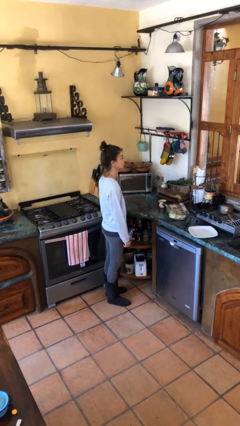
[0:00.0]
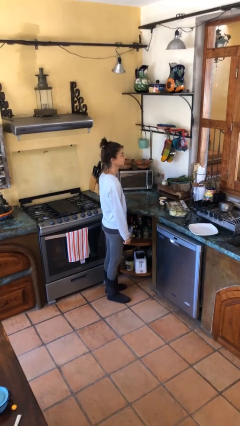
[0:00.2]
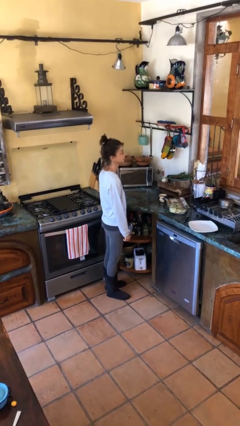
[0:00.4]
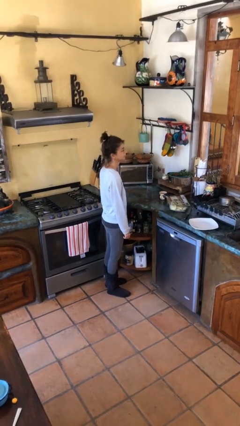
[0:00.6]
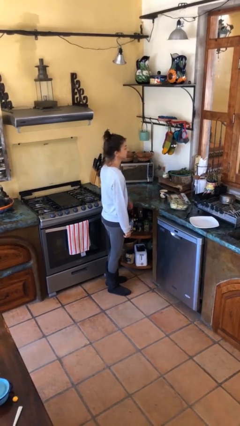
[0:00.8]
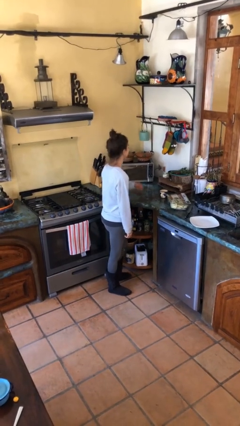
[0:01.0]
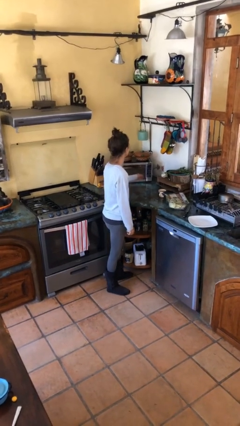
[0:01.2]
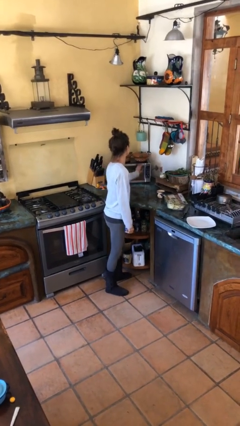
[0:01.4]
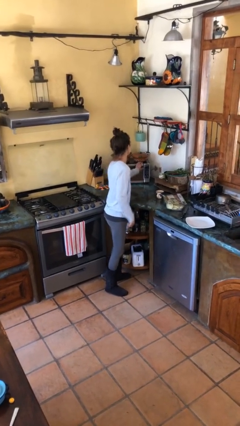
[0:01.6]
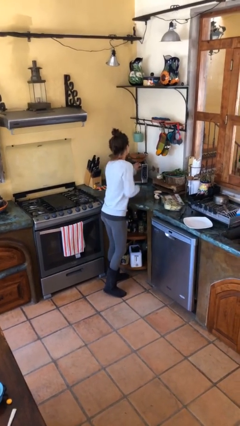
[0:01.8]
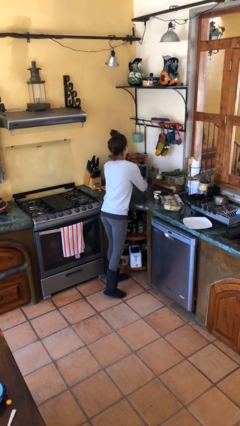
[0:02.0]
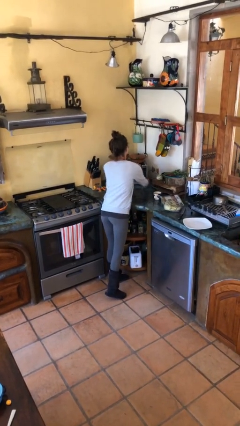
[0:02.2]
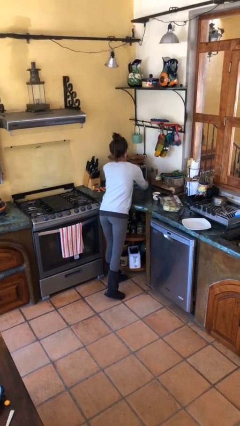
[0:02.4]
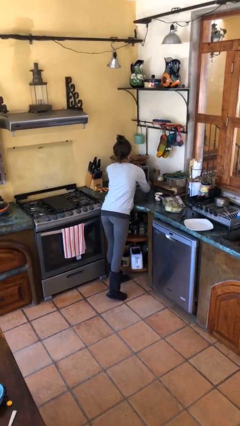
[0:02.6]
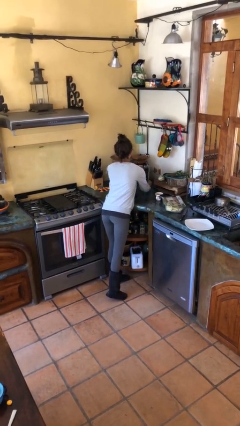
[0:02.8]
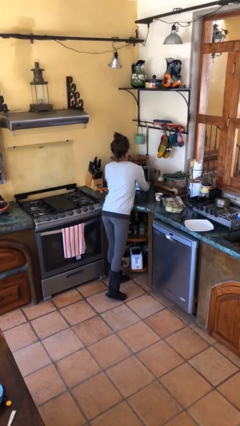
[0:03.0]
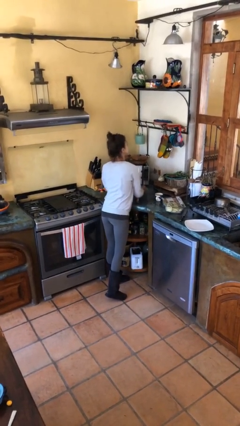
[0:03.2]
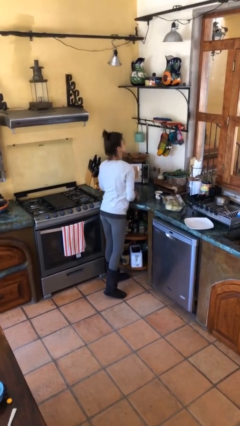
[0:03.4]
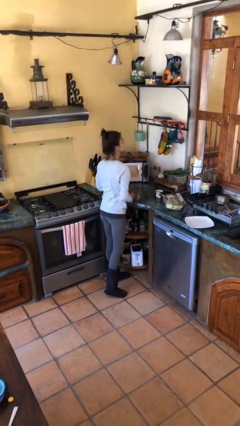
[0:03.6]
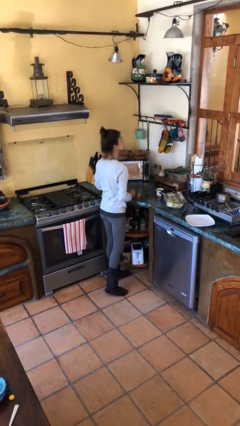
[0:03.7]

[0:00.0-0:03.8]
person opens microwave

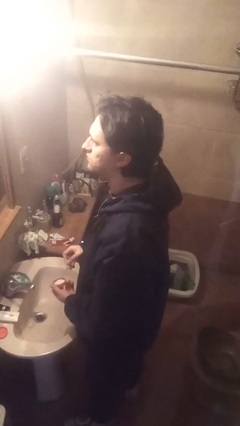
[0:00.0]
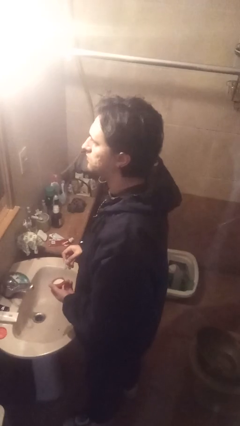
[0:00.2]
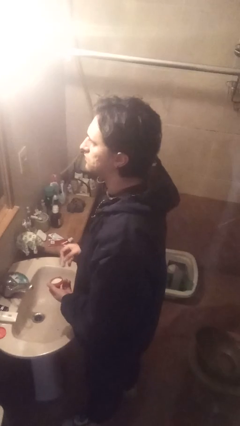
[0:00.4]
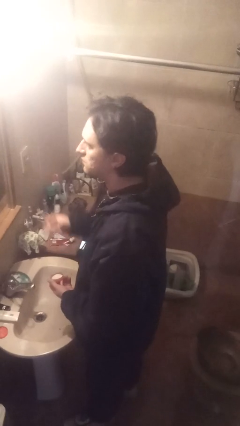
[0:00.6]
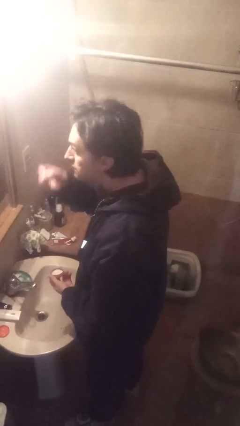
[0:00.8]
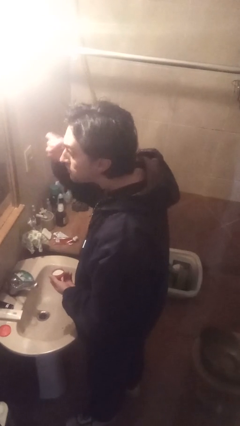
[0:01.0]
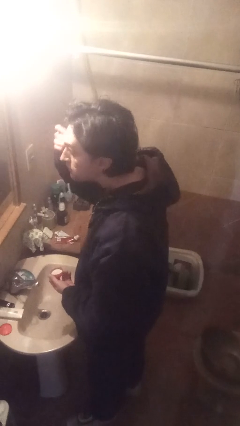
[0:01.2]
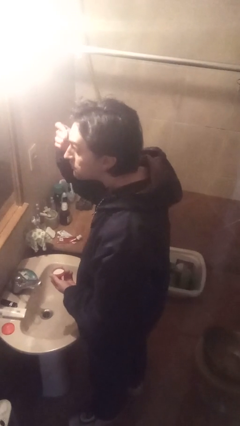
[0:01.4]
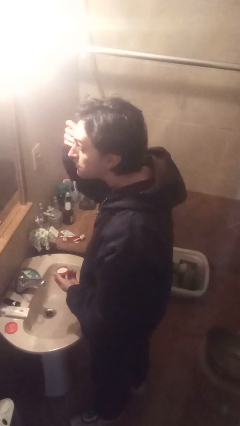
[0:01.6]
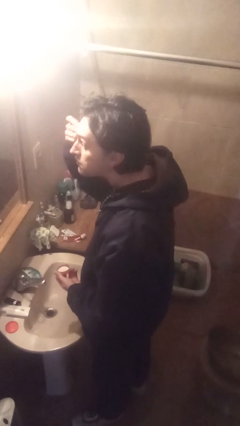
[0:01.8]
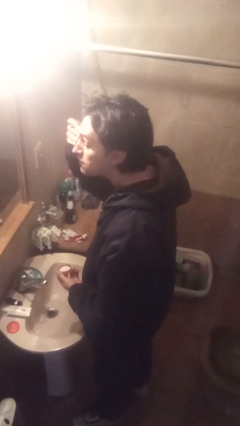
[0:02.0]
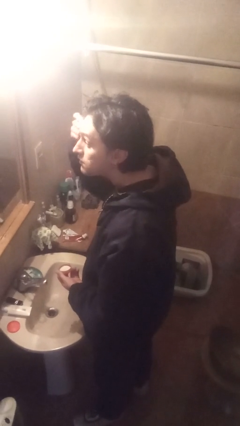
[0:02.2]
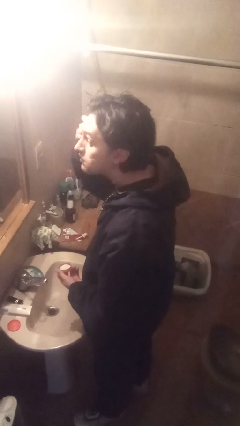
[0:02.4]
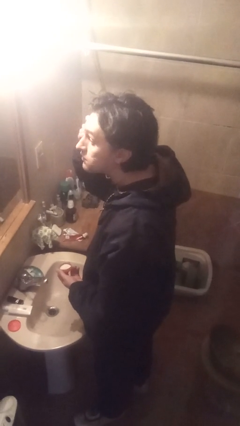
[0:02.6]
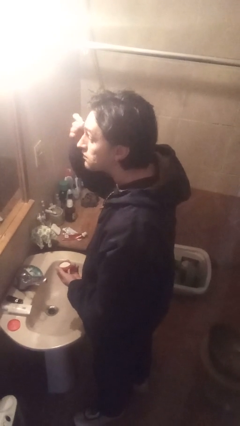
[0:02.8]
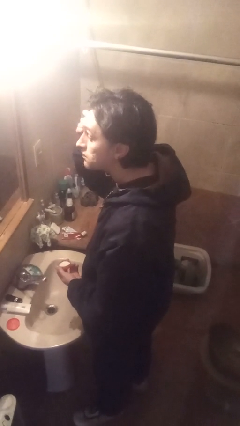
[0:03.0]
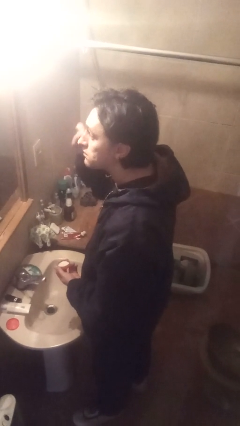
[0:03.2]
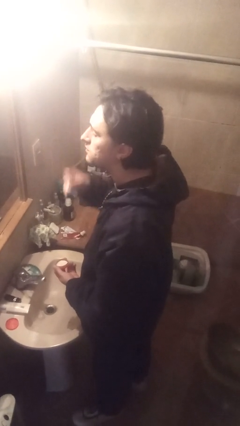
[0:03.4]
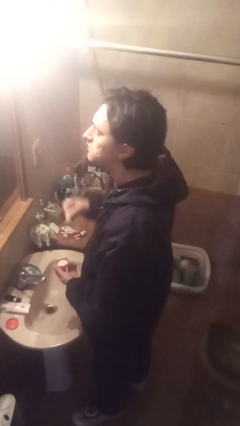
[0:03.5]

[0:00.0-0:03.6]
person applies eye makeup

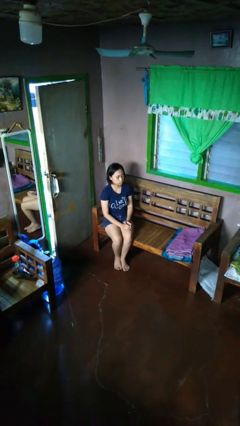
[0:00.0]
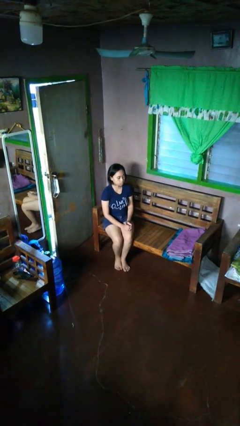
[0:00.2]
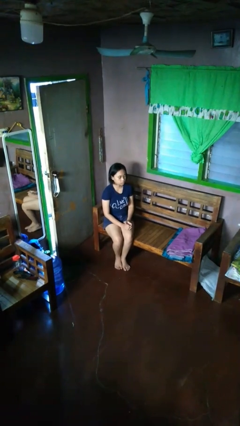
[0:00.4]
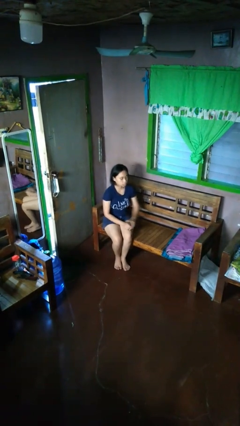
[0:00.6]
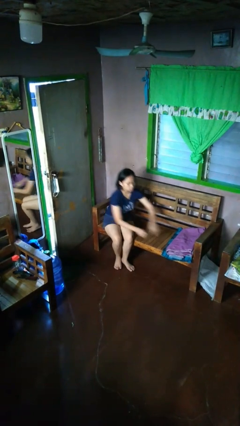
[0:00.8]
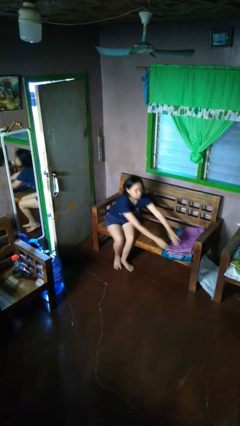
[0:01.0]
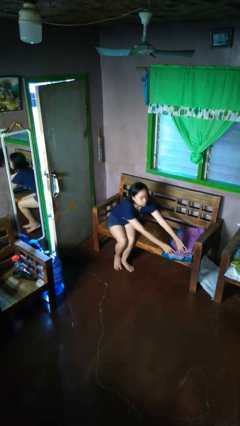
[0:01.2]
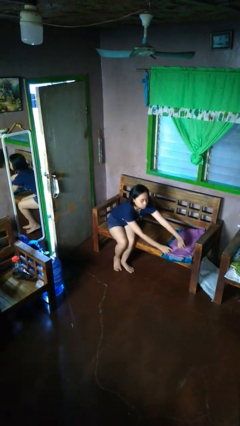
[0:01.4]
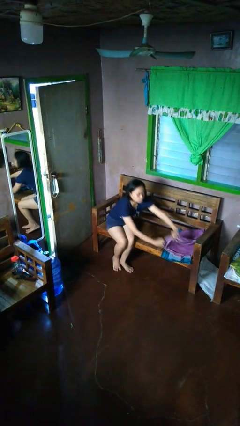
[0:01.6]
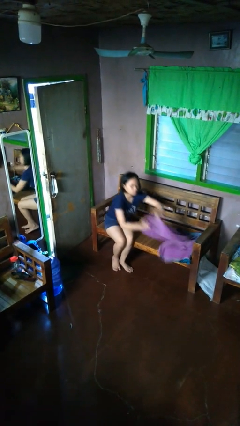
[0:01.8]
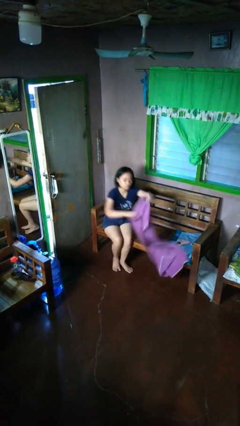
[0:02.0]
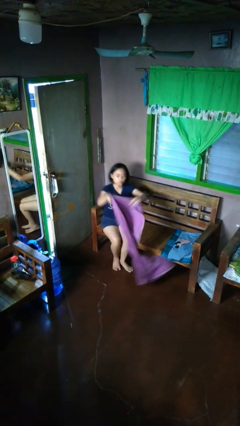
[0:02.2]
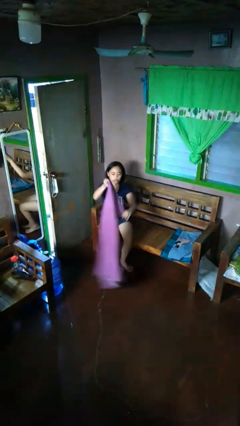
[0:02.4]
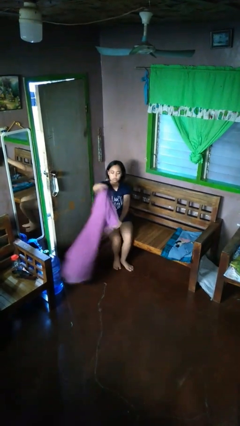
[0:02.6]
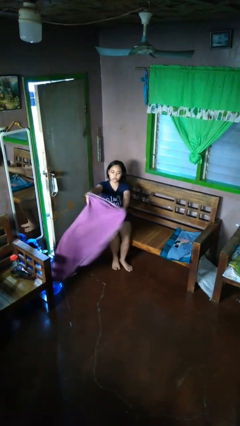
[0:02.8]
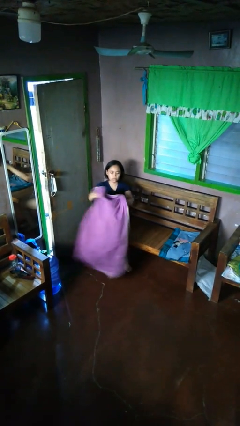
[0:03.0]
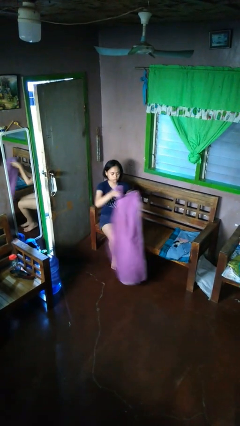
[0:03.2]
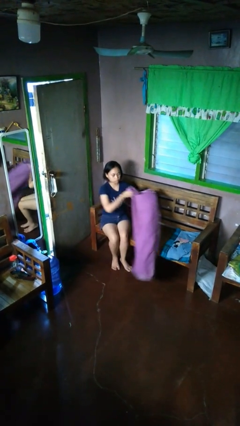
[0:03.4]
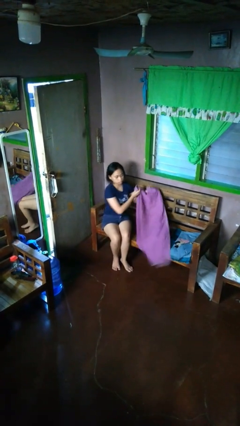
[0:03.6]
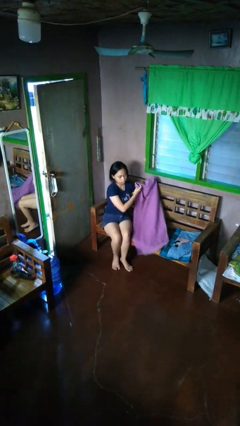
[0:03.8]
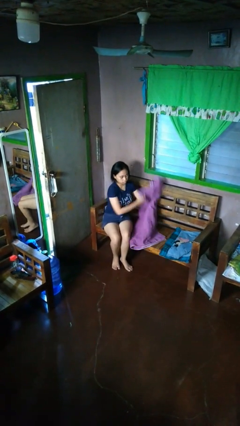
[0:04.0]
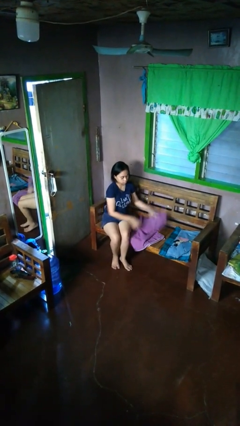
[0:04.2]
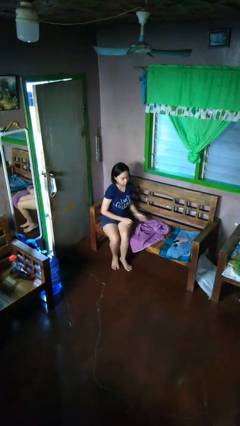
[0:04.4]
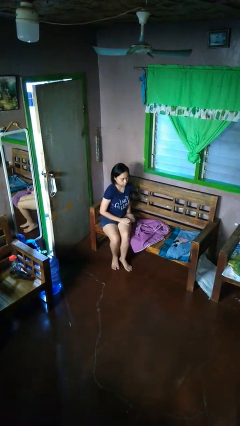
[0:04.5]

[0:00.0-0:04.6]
person unfolds blanket

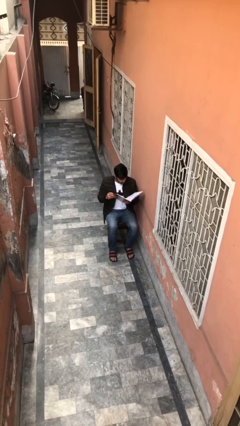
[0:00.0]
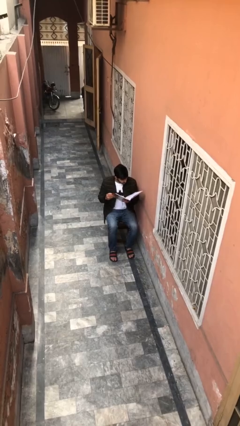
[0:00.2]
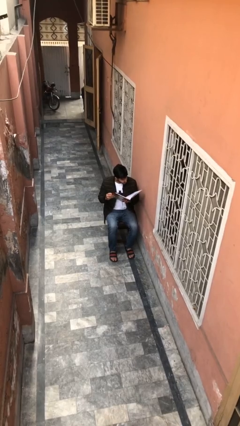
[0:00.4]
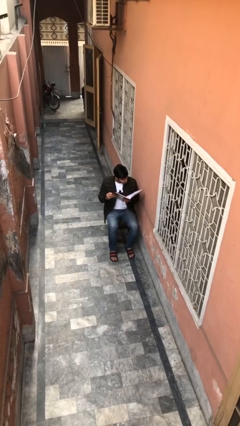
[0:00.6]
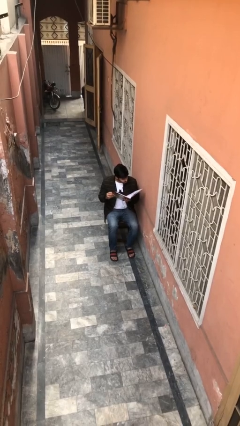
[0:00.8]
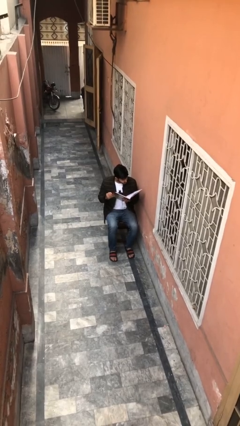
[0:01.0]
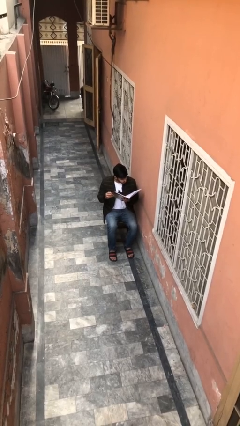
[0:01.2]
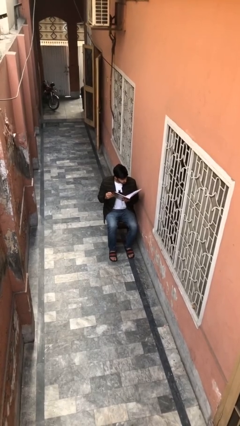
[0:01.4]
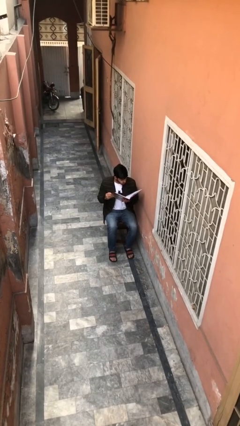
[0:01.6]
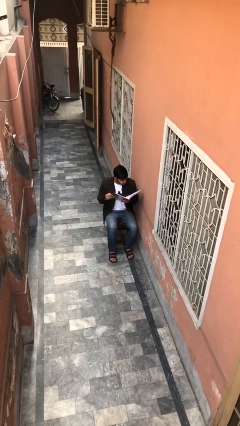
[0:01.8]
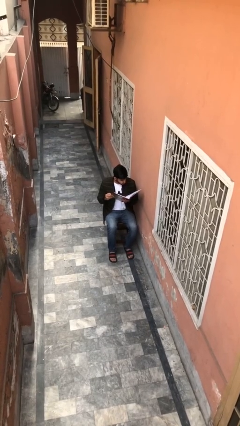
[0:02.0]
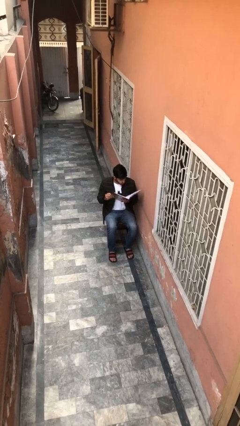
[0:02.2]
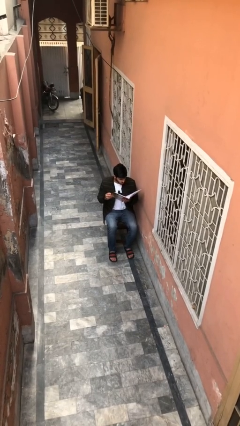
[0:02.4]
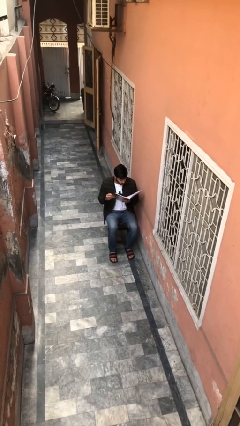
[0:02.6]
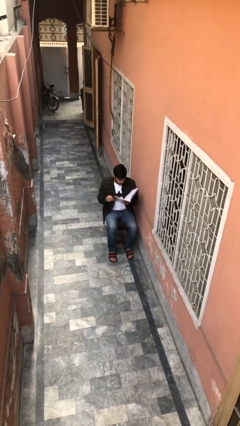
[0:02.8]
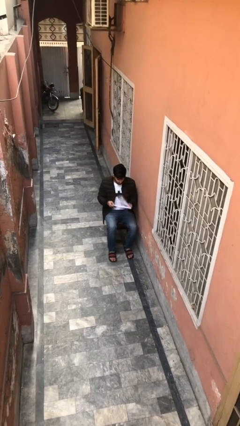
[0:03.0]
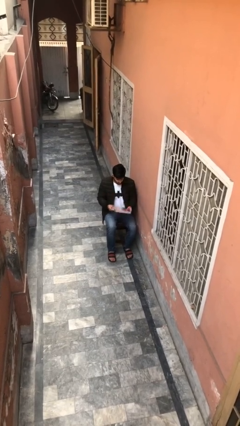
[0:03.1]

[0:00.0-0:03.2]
person reads document

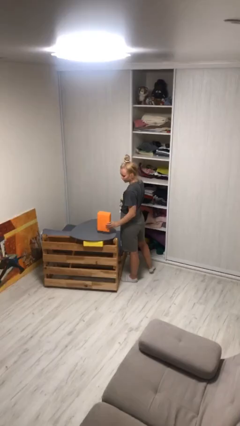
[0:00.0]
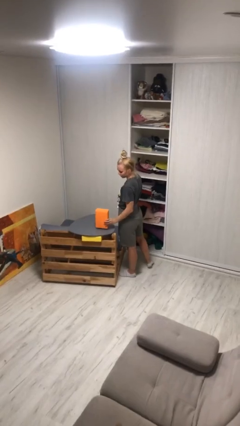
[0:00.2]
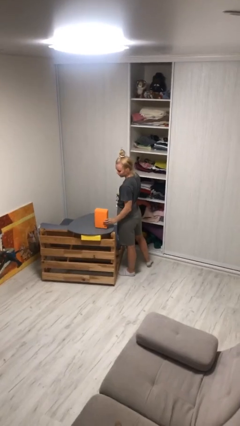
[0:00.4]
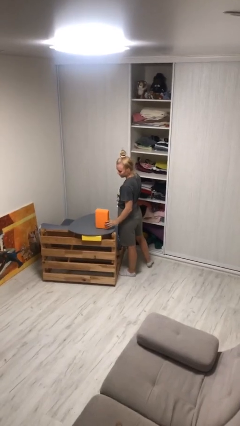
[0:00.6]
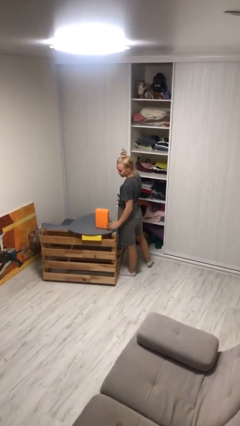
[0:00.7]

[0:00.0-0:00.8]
person puts down object on table

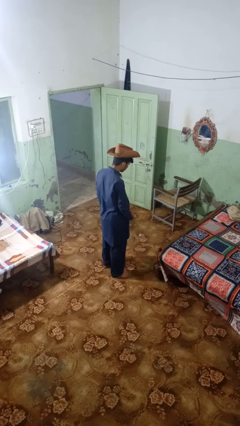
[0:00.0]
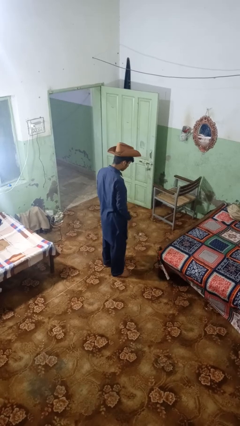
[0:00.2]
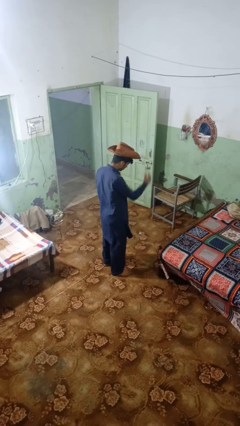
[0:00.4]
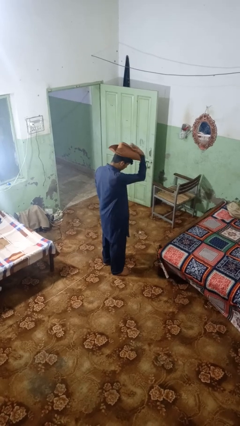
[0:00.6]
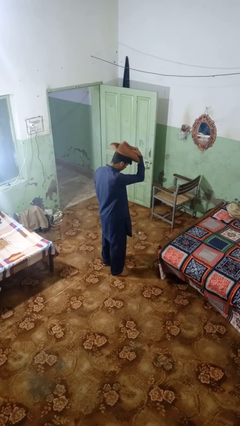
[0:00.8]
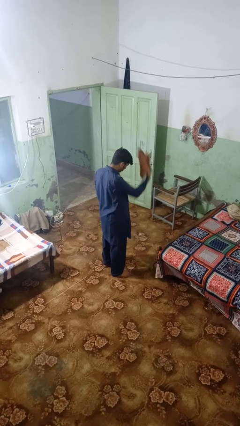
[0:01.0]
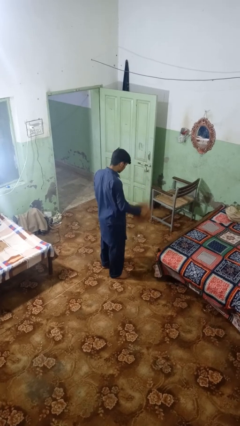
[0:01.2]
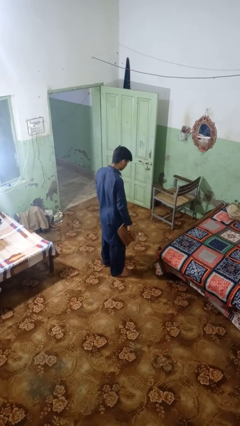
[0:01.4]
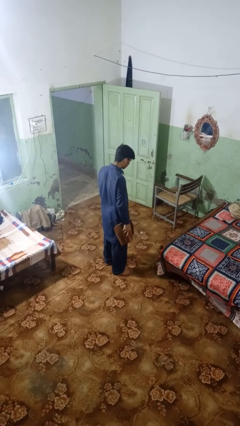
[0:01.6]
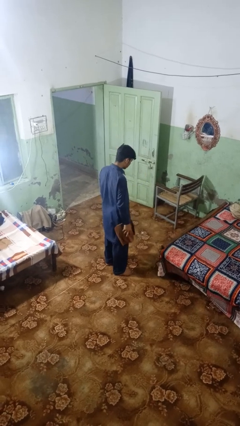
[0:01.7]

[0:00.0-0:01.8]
person takes off hat
